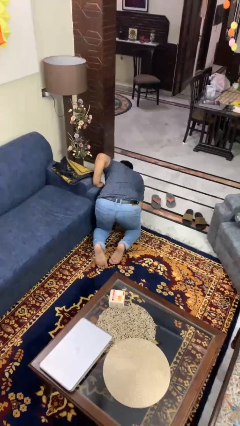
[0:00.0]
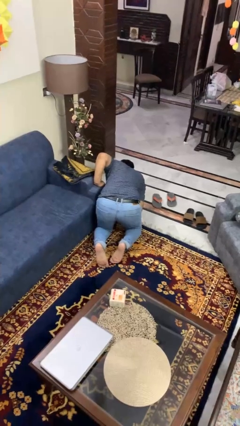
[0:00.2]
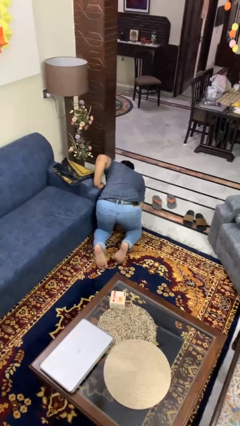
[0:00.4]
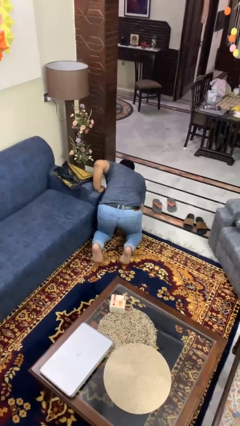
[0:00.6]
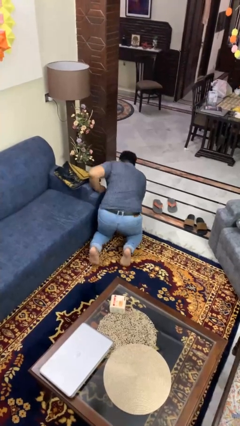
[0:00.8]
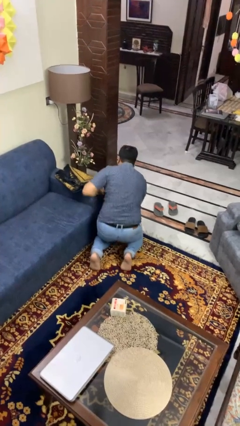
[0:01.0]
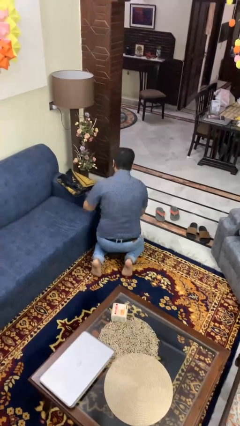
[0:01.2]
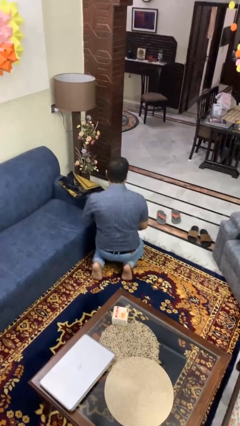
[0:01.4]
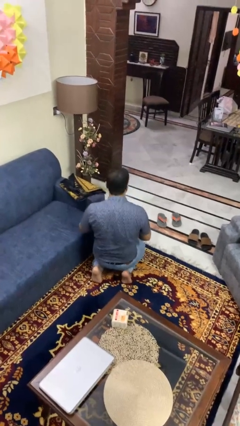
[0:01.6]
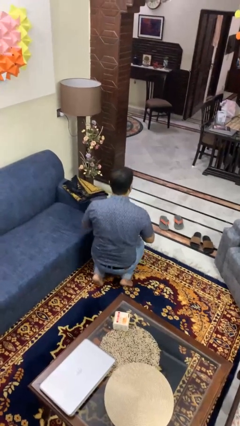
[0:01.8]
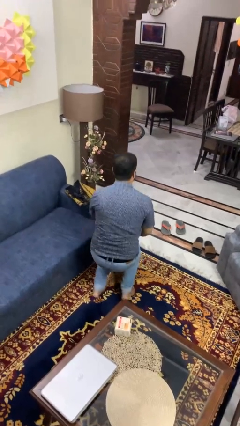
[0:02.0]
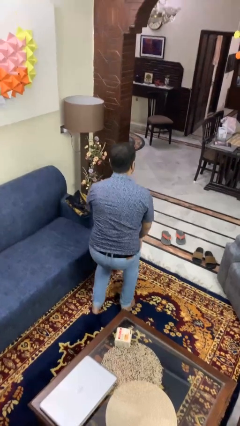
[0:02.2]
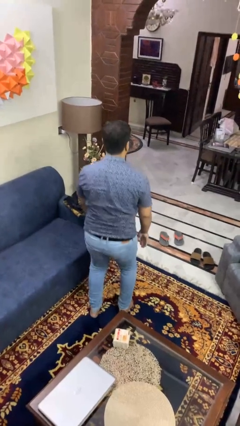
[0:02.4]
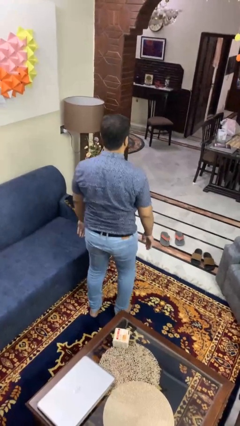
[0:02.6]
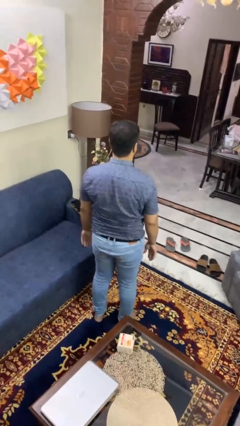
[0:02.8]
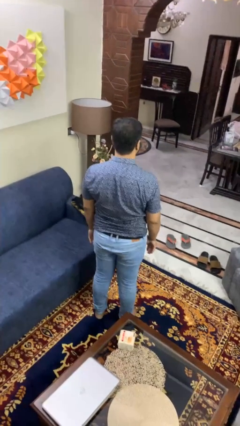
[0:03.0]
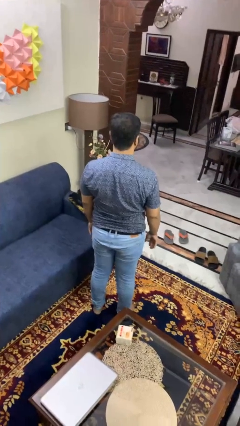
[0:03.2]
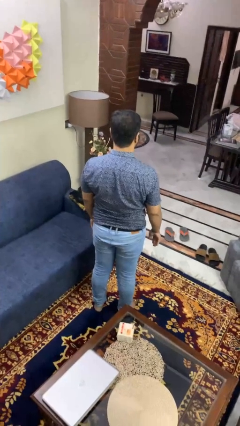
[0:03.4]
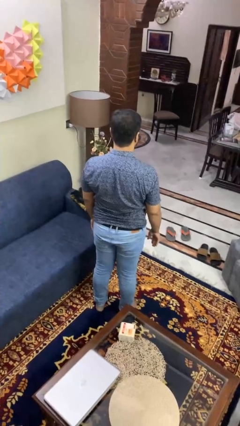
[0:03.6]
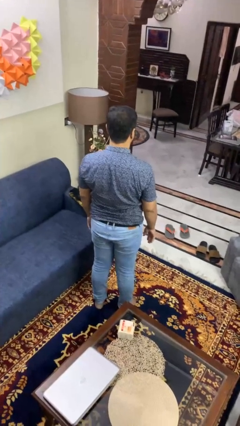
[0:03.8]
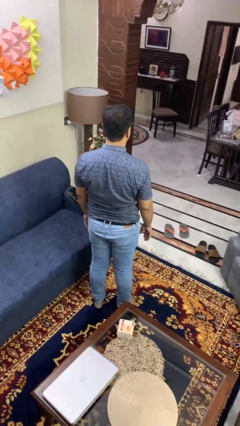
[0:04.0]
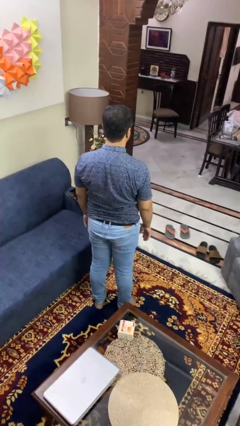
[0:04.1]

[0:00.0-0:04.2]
person stands up from floor

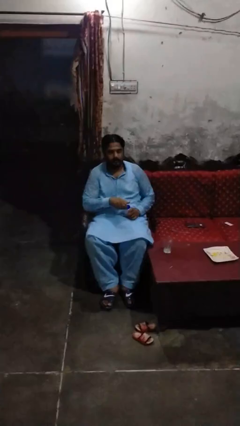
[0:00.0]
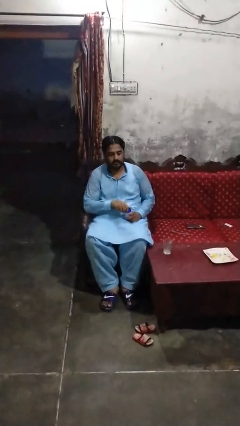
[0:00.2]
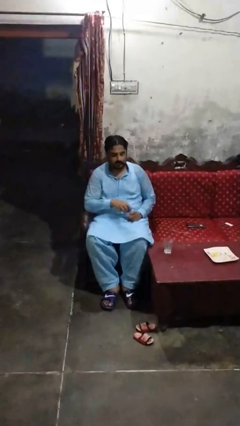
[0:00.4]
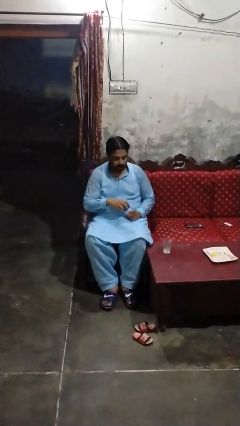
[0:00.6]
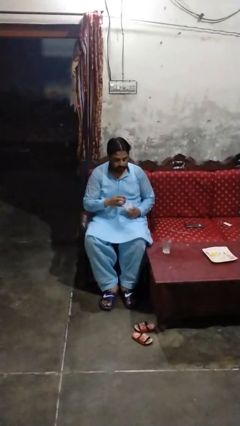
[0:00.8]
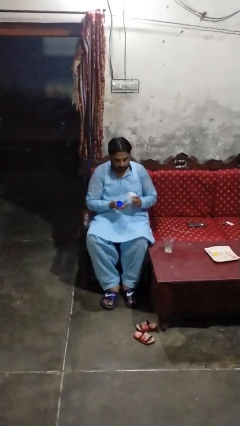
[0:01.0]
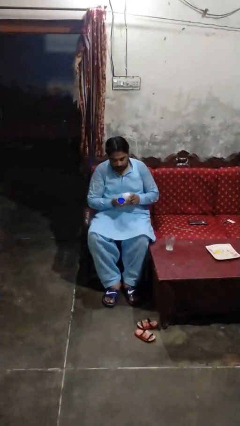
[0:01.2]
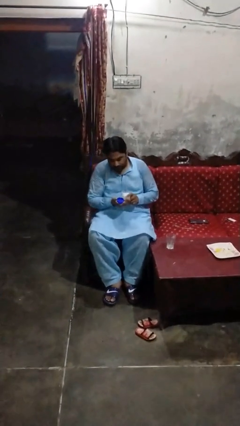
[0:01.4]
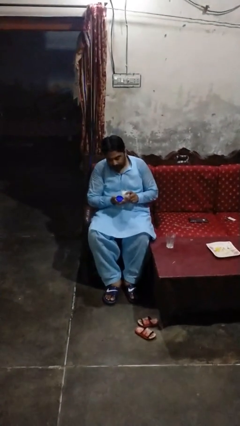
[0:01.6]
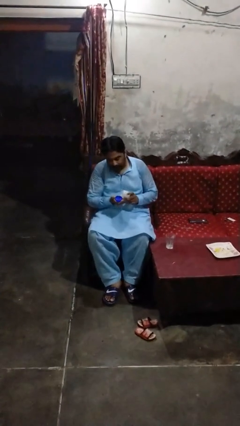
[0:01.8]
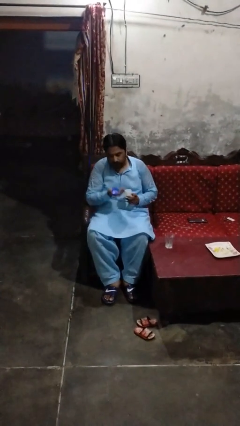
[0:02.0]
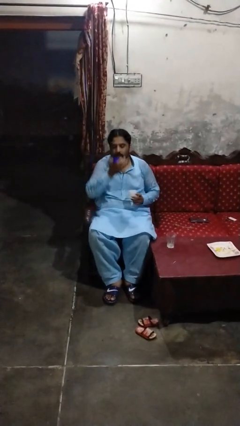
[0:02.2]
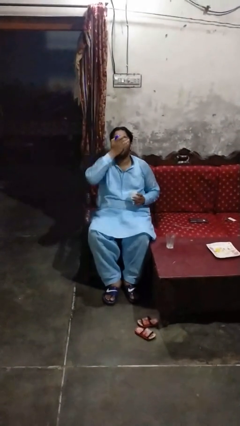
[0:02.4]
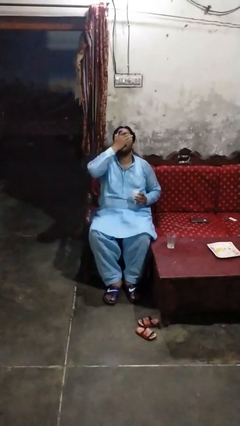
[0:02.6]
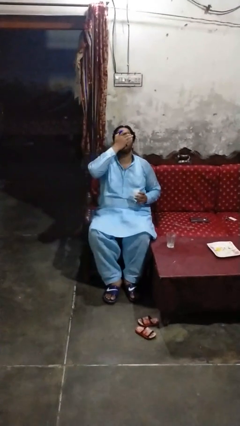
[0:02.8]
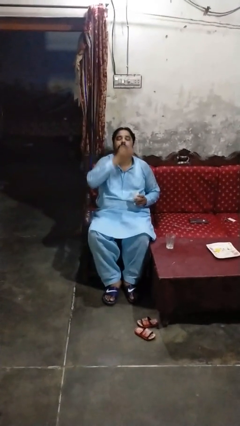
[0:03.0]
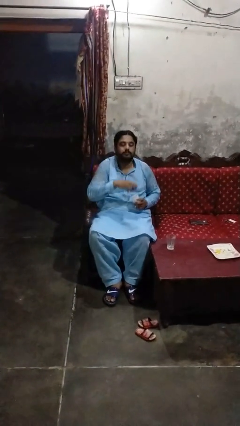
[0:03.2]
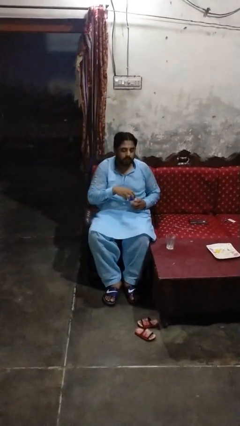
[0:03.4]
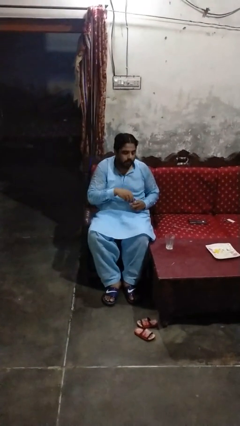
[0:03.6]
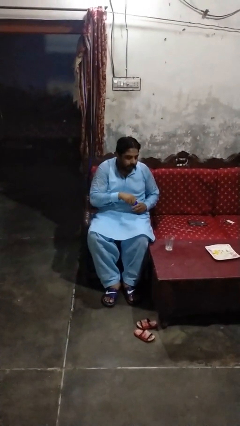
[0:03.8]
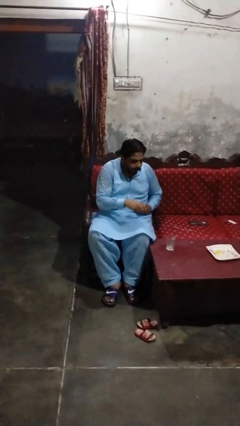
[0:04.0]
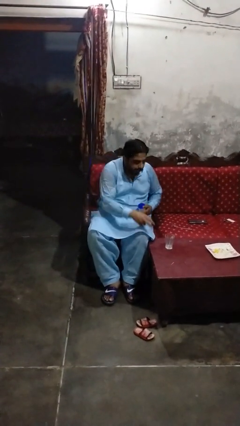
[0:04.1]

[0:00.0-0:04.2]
person takes medicine pills

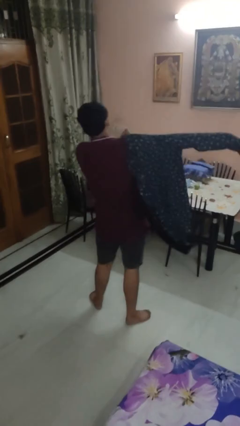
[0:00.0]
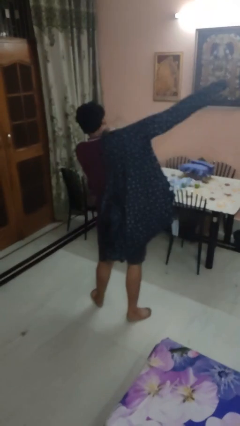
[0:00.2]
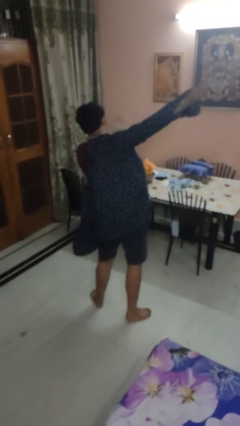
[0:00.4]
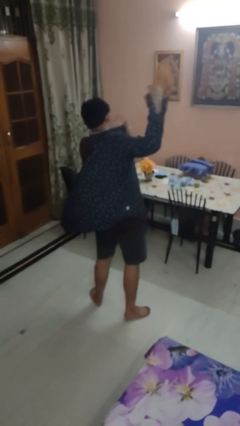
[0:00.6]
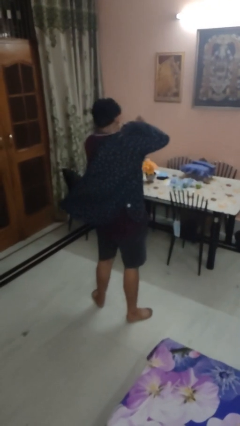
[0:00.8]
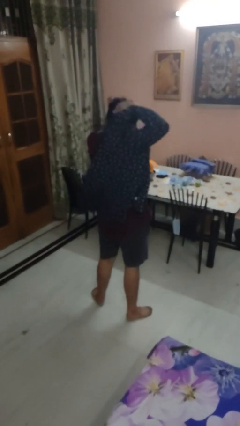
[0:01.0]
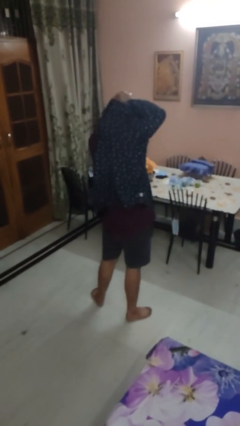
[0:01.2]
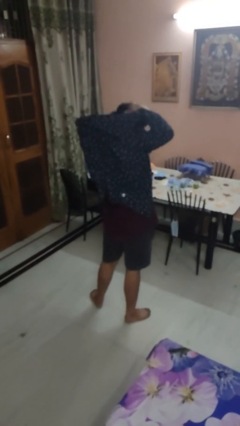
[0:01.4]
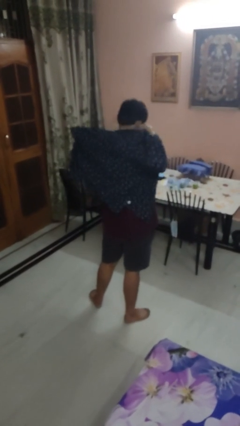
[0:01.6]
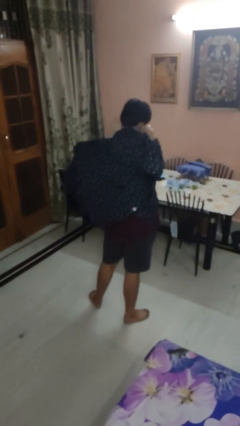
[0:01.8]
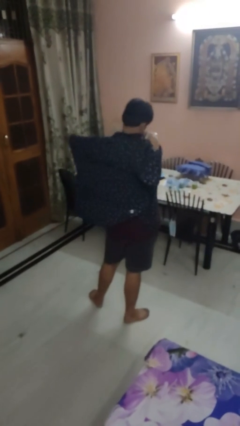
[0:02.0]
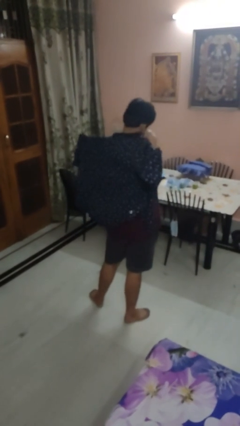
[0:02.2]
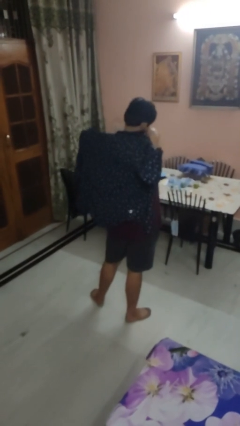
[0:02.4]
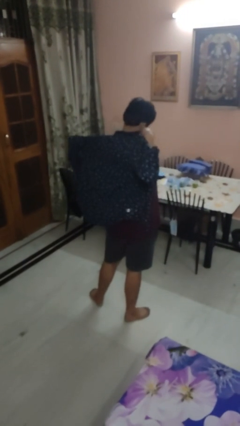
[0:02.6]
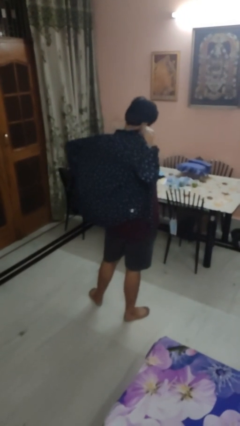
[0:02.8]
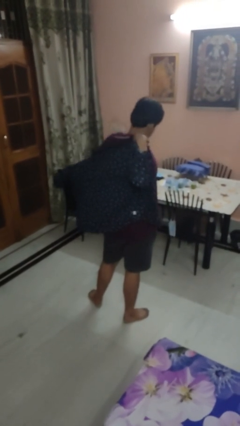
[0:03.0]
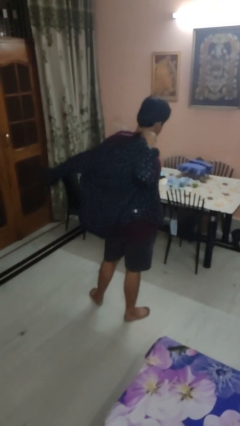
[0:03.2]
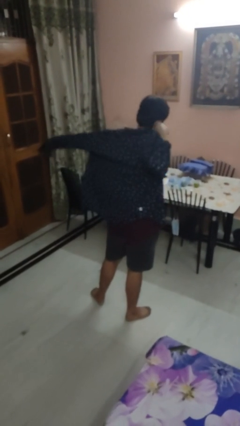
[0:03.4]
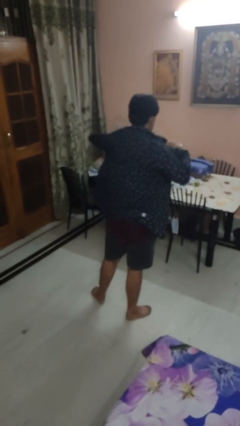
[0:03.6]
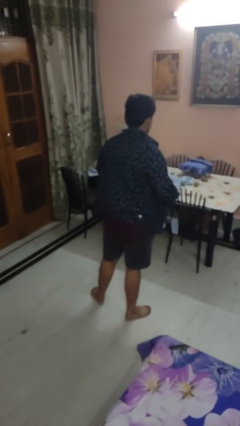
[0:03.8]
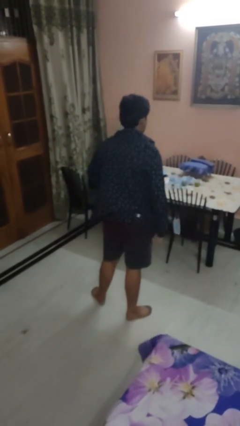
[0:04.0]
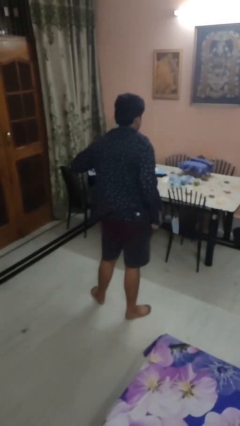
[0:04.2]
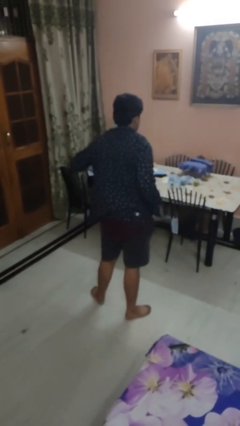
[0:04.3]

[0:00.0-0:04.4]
person puts on shirt

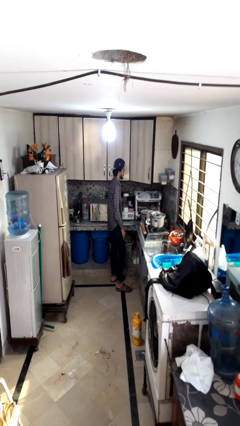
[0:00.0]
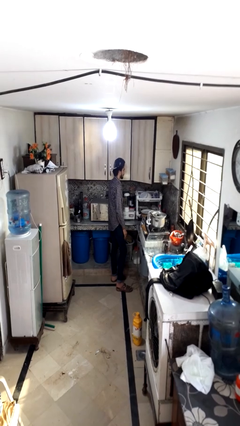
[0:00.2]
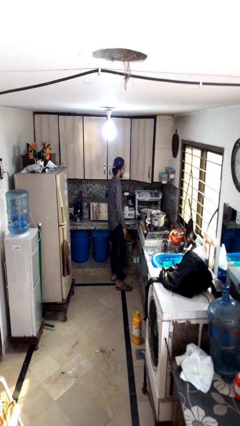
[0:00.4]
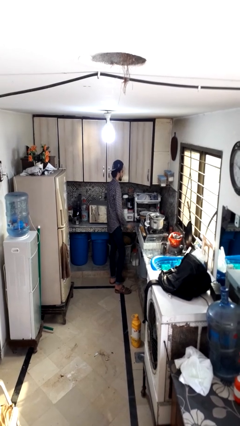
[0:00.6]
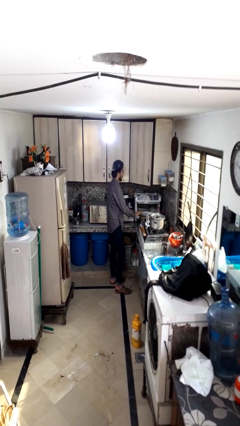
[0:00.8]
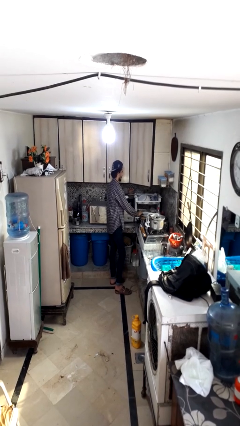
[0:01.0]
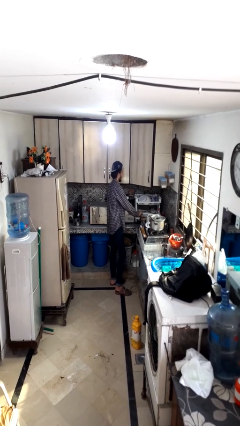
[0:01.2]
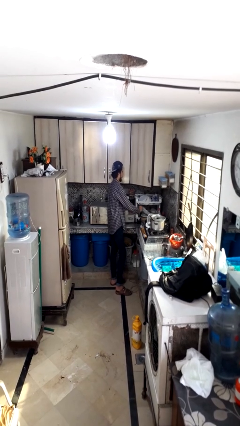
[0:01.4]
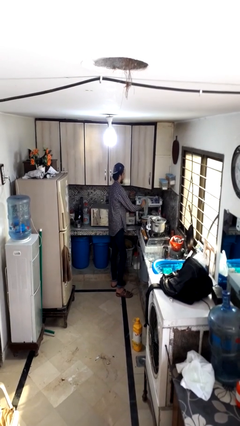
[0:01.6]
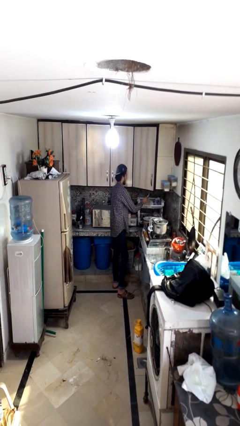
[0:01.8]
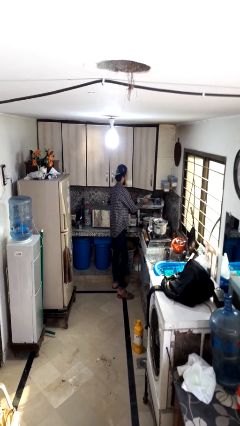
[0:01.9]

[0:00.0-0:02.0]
person loads dishwasher

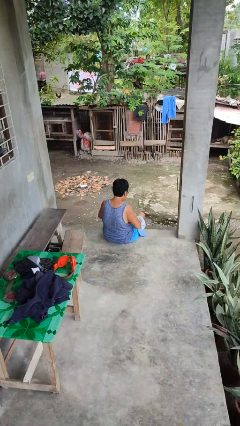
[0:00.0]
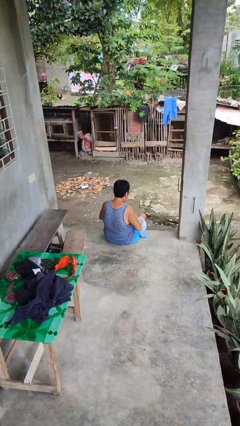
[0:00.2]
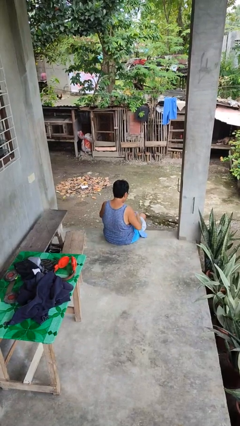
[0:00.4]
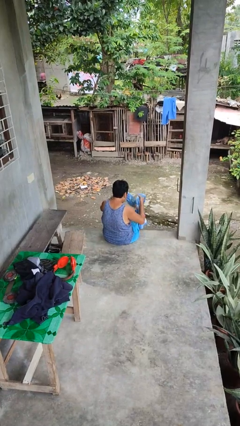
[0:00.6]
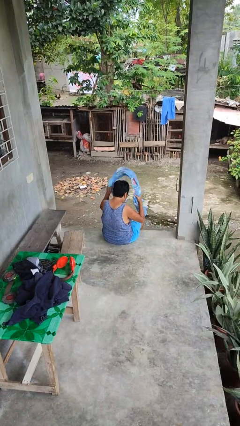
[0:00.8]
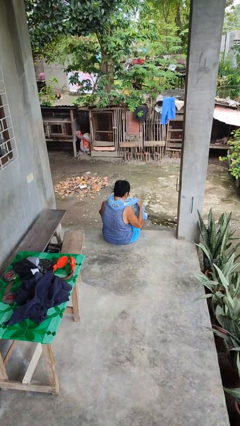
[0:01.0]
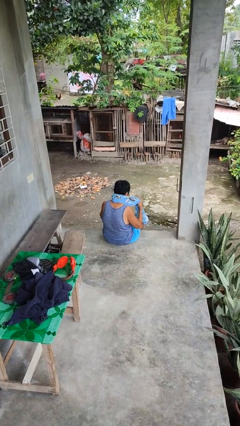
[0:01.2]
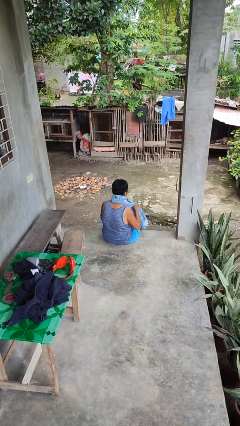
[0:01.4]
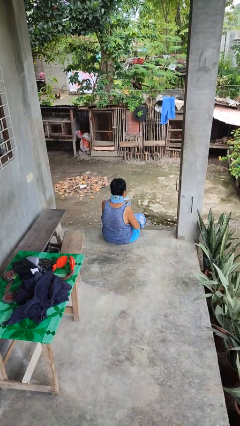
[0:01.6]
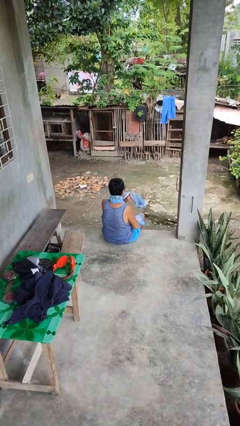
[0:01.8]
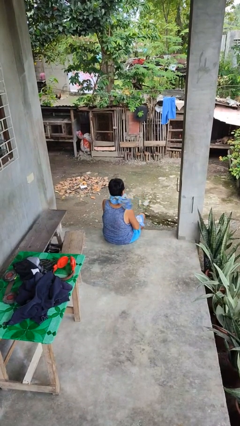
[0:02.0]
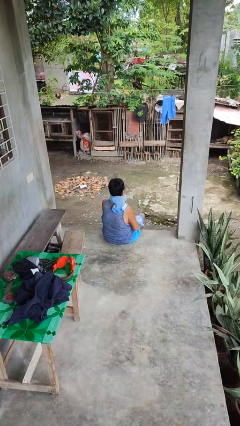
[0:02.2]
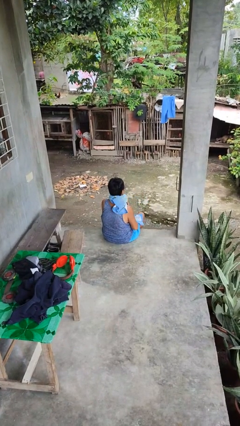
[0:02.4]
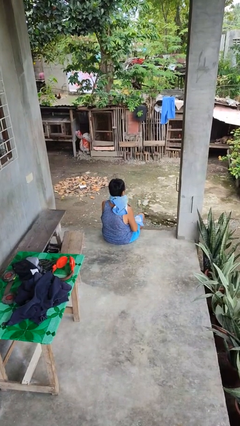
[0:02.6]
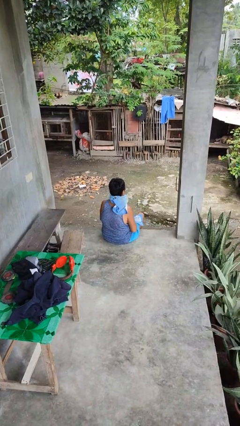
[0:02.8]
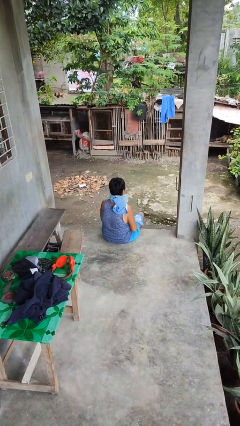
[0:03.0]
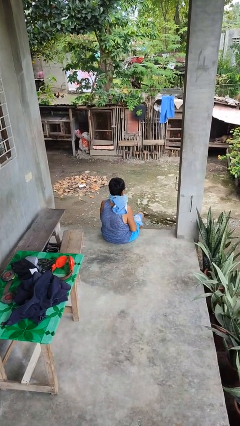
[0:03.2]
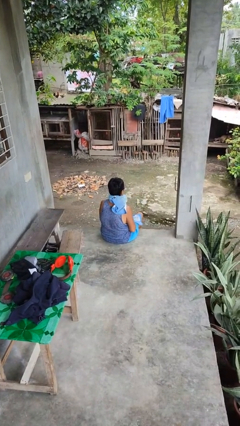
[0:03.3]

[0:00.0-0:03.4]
person puts on scarf
